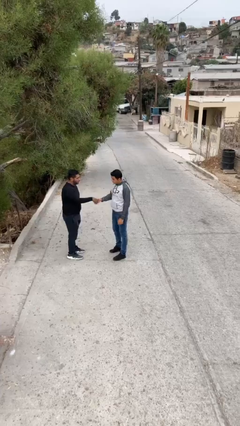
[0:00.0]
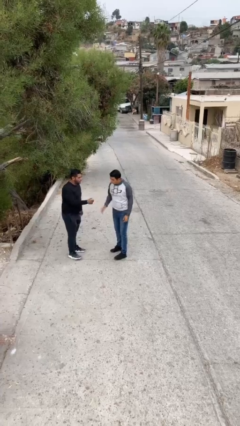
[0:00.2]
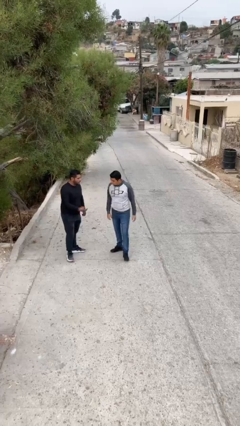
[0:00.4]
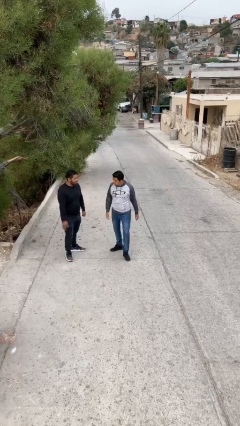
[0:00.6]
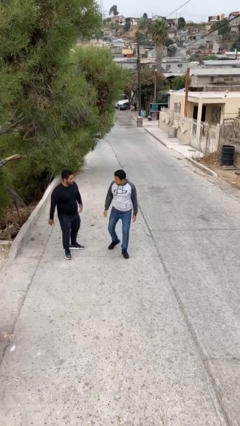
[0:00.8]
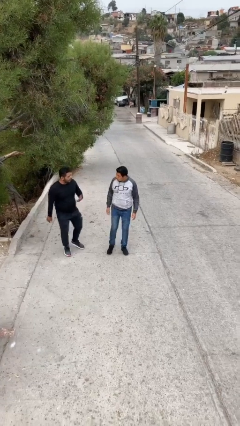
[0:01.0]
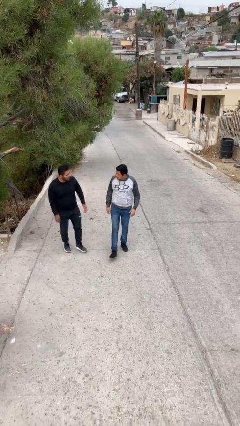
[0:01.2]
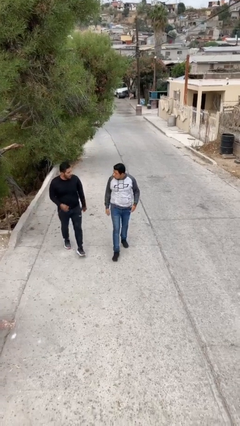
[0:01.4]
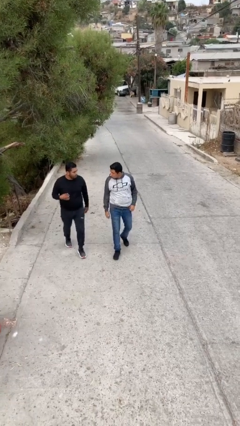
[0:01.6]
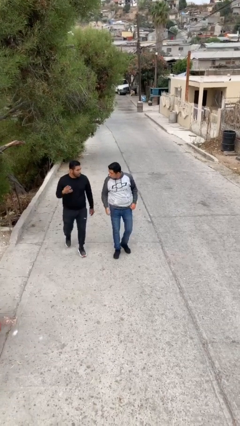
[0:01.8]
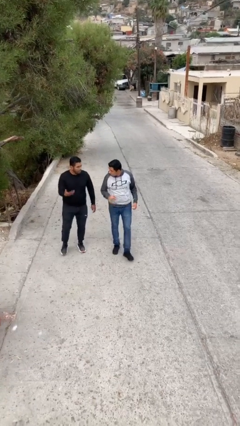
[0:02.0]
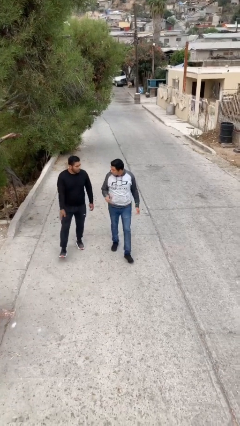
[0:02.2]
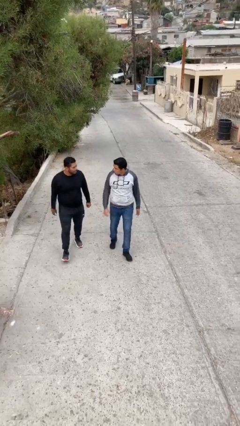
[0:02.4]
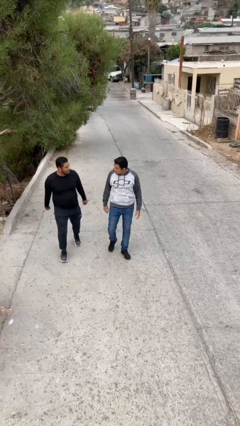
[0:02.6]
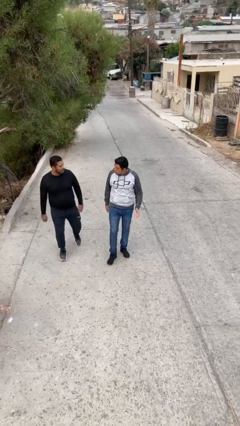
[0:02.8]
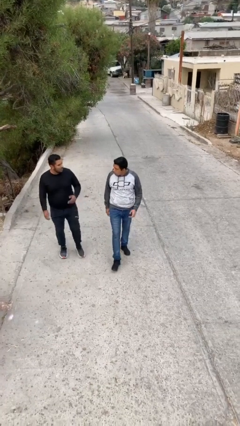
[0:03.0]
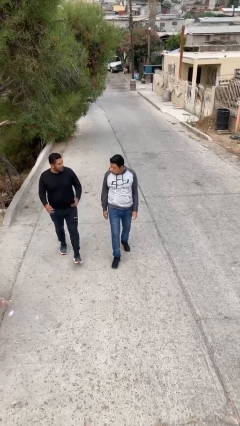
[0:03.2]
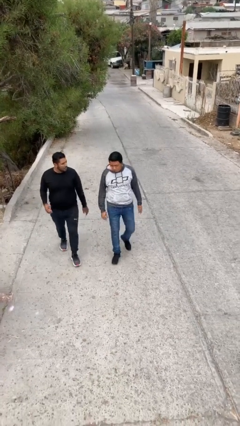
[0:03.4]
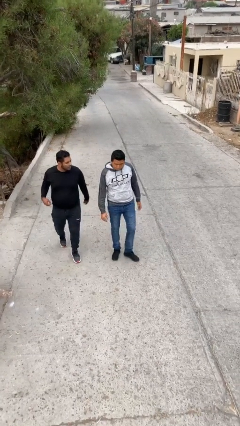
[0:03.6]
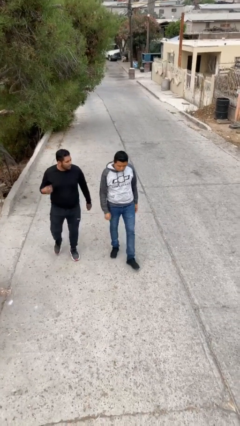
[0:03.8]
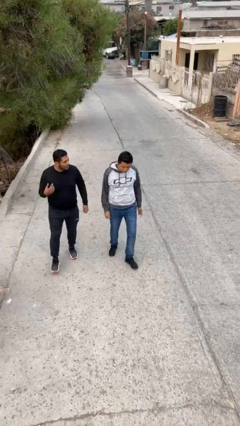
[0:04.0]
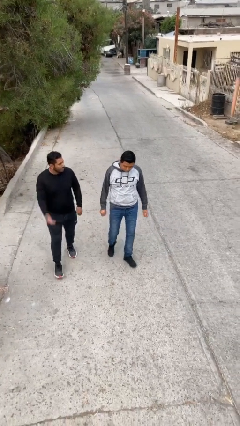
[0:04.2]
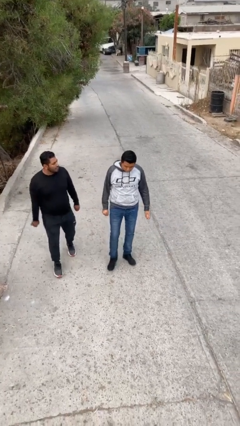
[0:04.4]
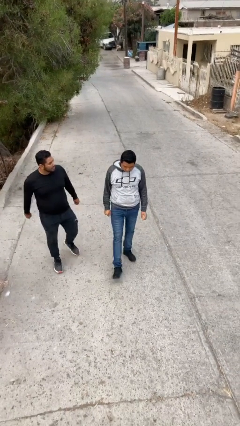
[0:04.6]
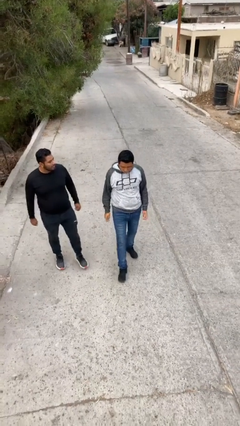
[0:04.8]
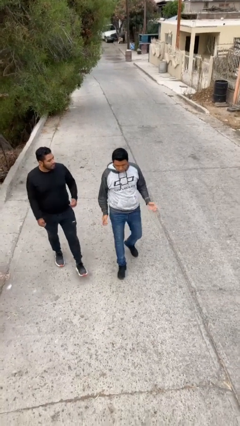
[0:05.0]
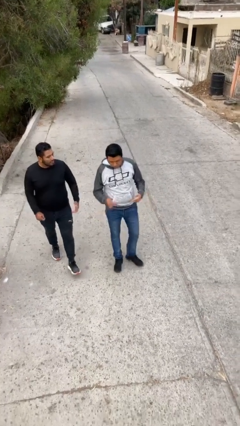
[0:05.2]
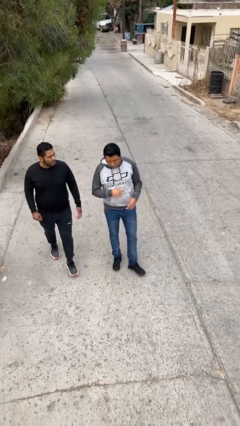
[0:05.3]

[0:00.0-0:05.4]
person talks to person

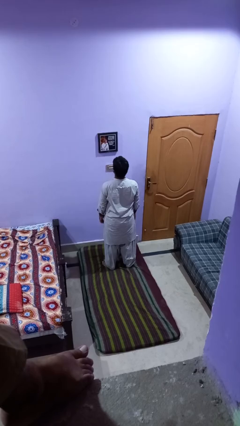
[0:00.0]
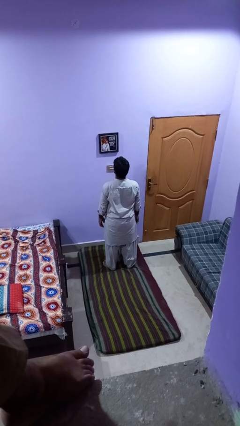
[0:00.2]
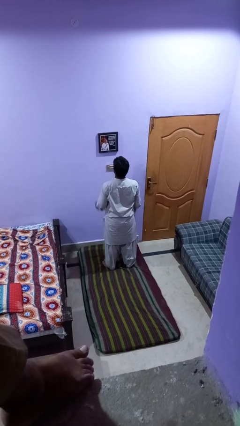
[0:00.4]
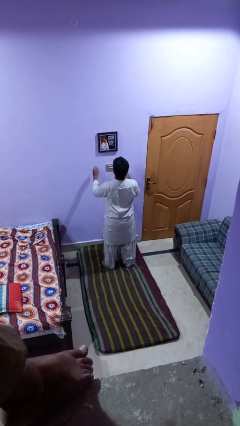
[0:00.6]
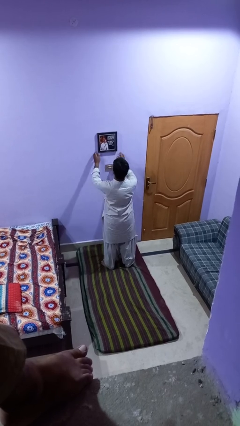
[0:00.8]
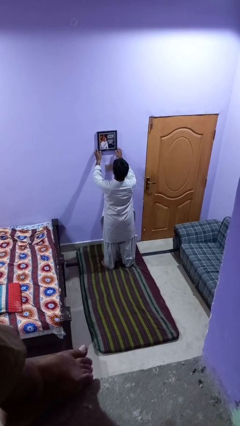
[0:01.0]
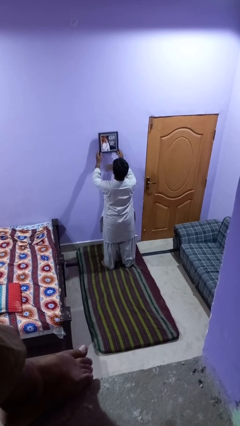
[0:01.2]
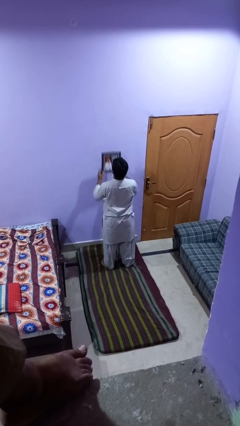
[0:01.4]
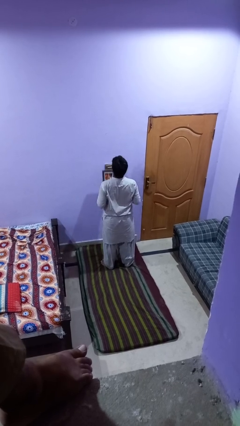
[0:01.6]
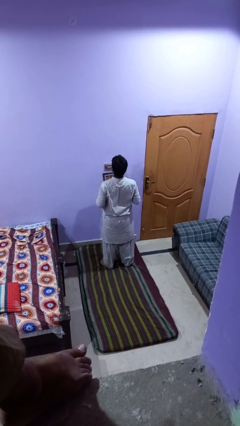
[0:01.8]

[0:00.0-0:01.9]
person takes down picture frame

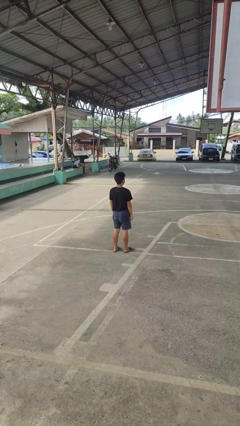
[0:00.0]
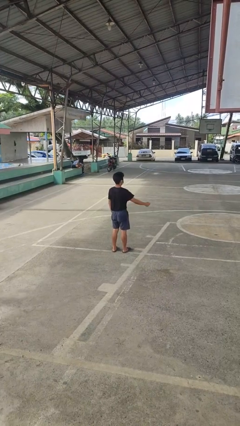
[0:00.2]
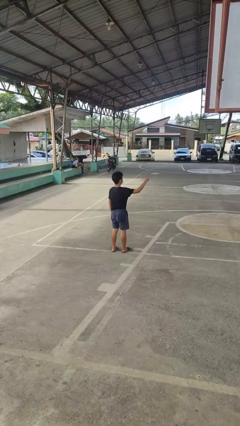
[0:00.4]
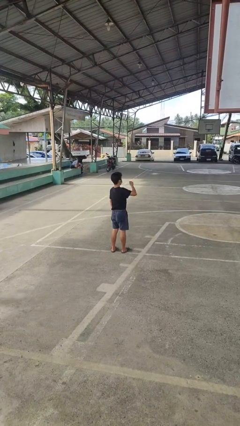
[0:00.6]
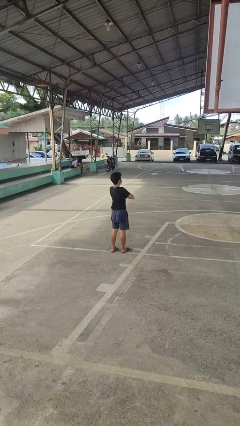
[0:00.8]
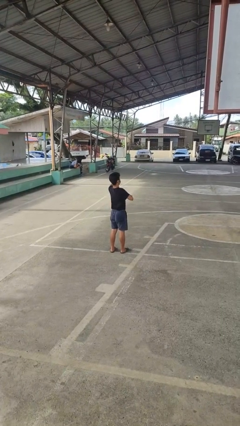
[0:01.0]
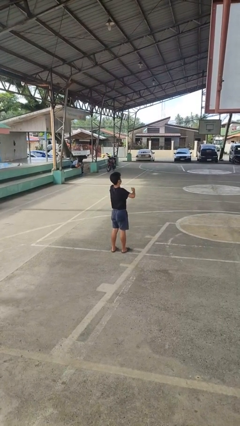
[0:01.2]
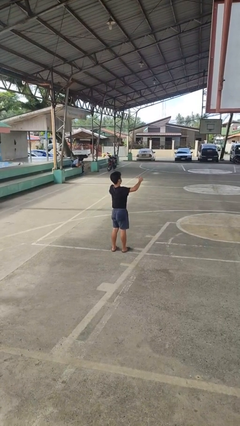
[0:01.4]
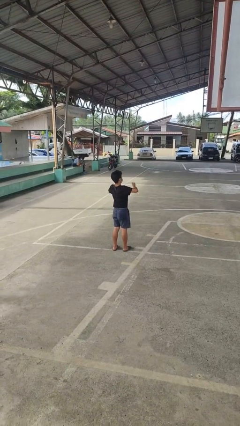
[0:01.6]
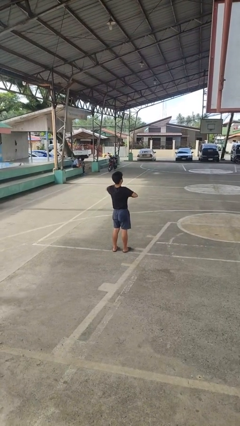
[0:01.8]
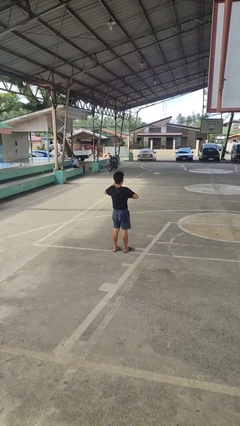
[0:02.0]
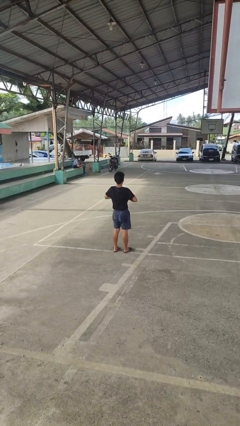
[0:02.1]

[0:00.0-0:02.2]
person drums on chest

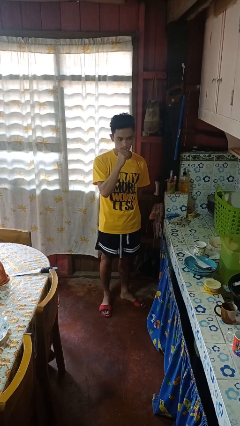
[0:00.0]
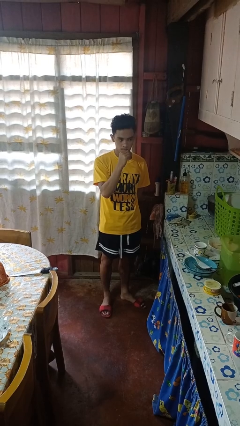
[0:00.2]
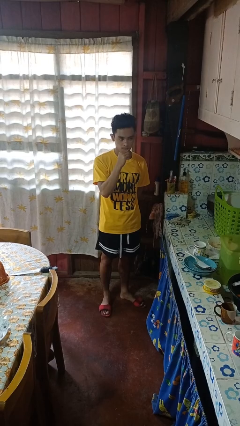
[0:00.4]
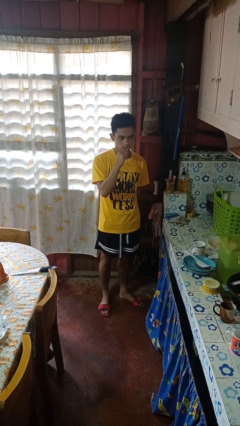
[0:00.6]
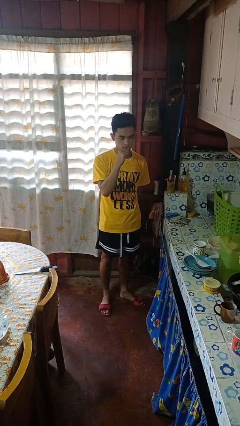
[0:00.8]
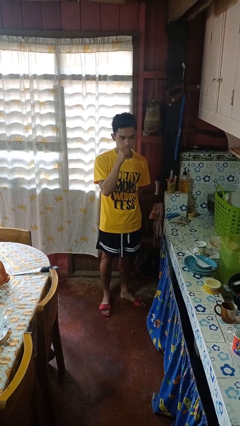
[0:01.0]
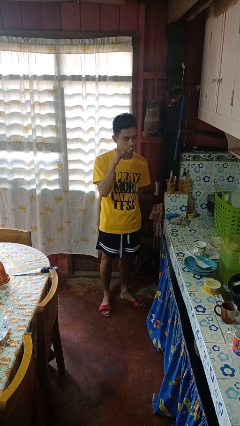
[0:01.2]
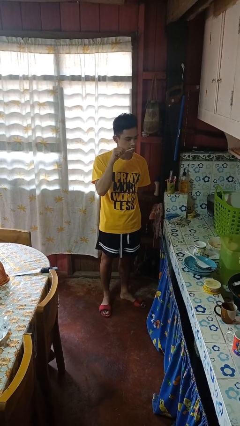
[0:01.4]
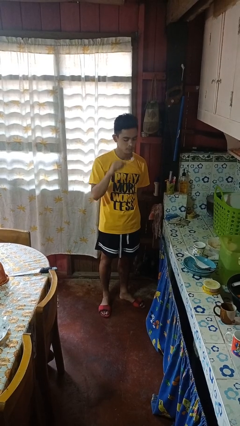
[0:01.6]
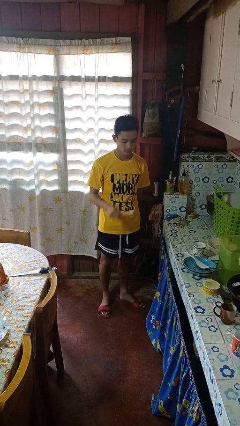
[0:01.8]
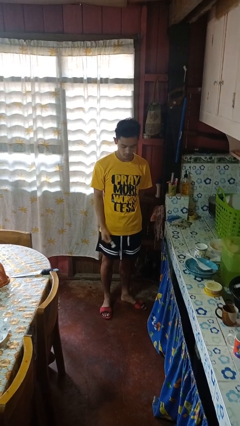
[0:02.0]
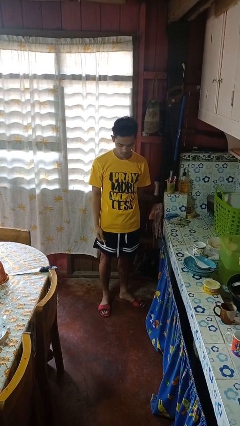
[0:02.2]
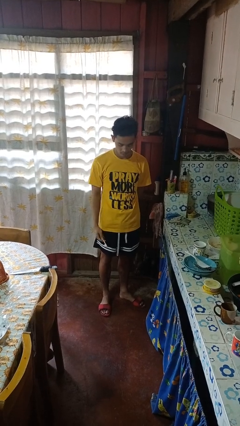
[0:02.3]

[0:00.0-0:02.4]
person brushes teeth

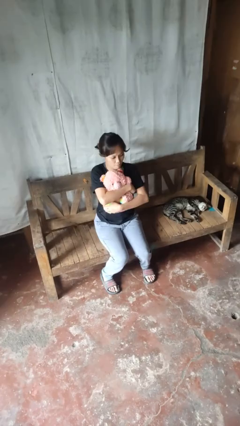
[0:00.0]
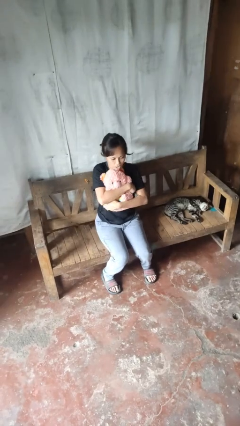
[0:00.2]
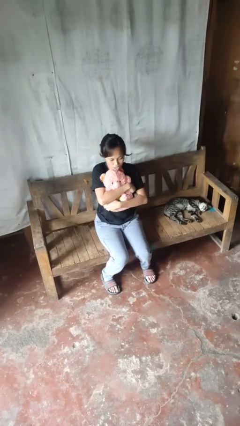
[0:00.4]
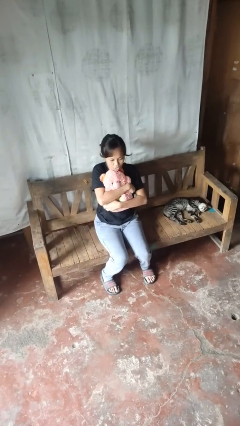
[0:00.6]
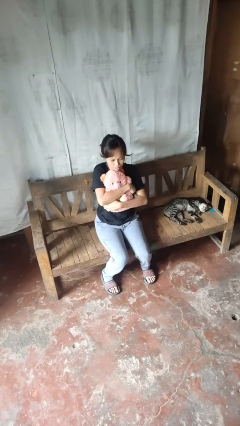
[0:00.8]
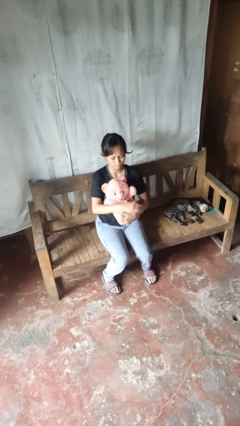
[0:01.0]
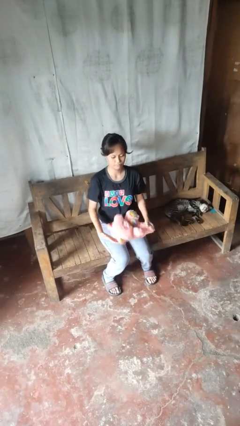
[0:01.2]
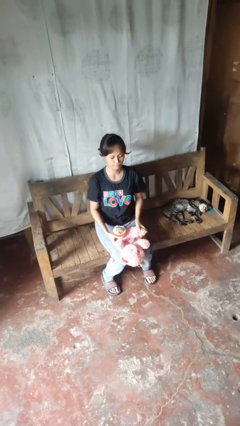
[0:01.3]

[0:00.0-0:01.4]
person hugs stuffed animal

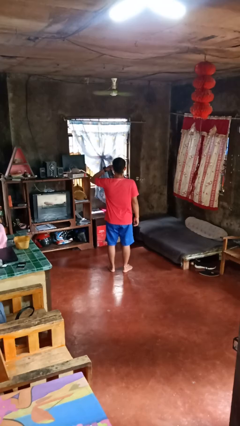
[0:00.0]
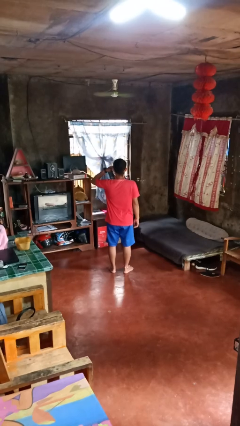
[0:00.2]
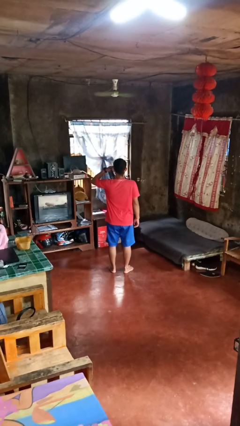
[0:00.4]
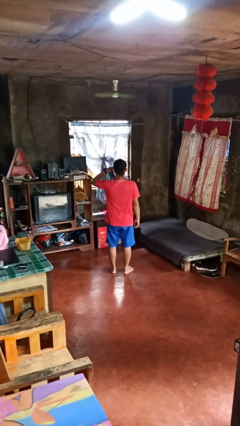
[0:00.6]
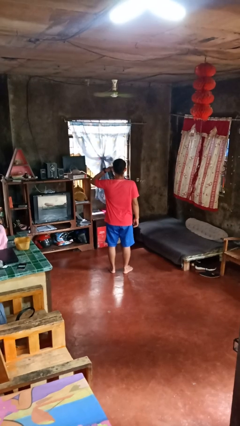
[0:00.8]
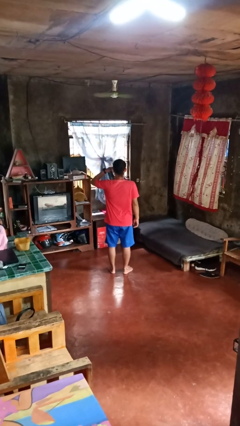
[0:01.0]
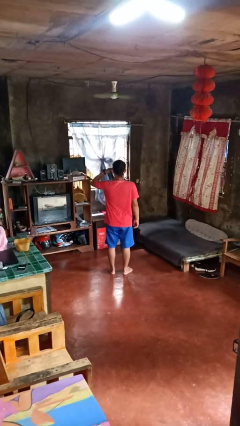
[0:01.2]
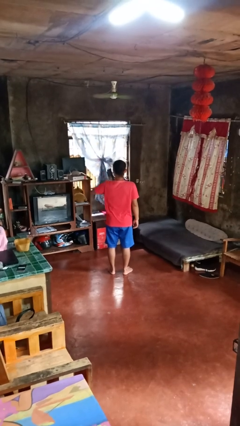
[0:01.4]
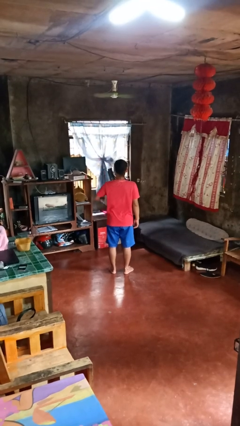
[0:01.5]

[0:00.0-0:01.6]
person salutes

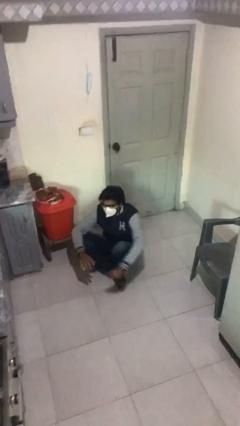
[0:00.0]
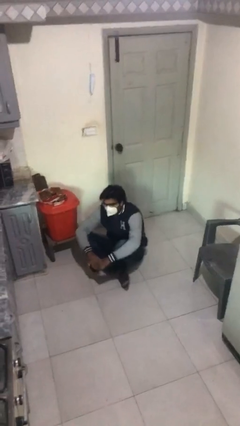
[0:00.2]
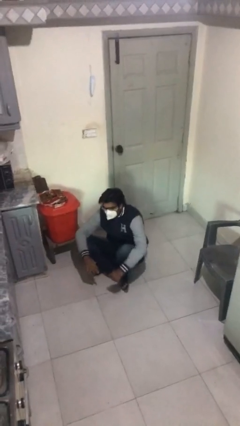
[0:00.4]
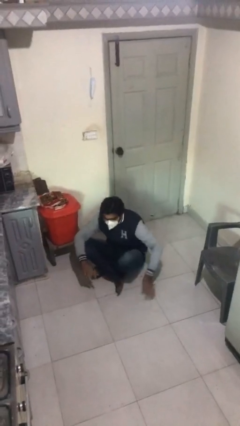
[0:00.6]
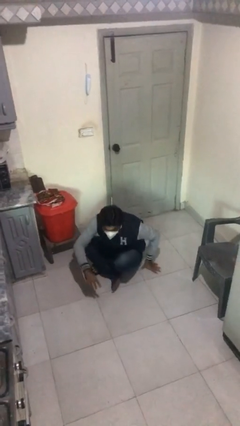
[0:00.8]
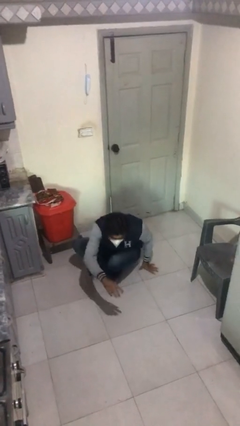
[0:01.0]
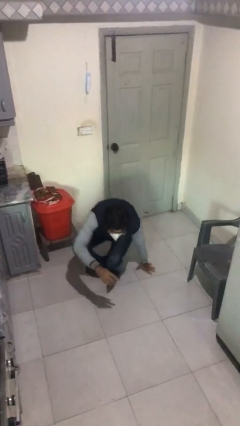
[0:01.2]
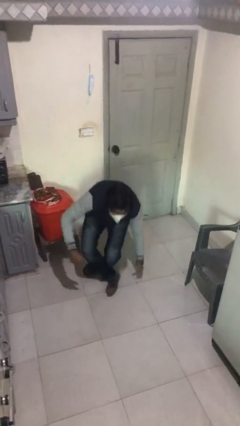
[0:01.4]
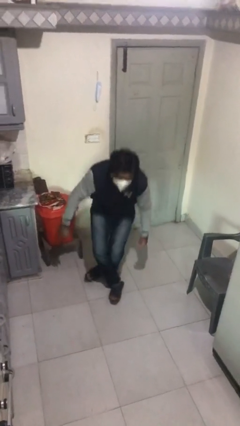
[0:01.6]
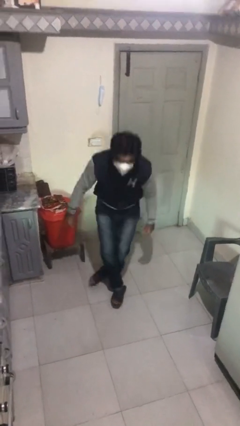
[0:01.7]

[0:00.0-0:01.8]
person stands up
